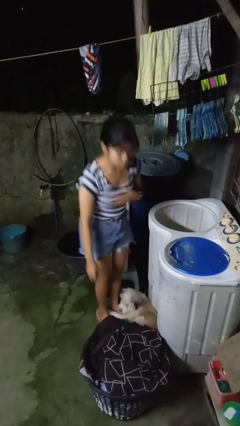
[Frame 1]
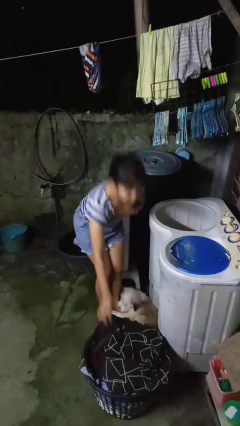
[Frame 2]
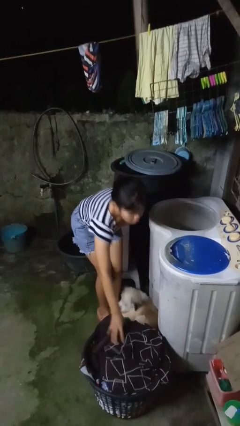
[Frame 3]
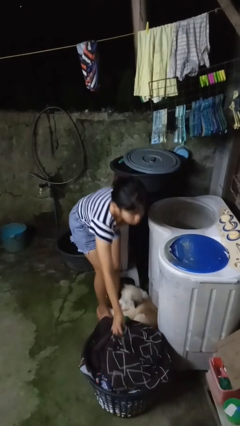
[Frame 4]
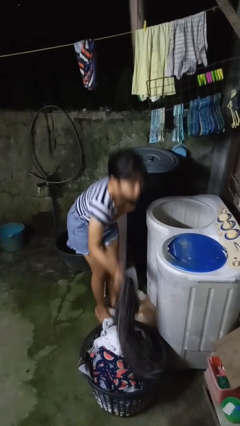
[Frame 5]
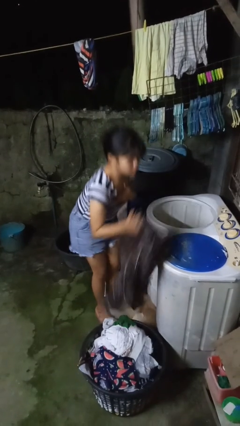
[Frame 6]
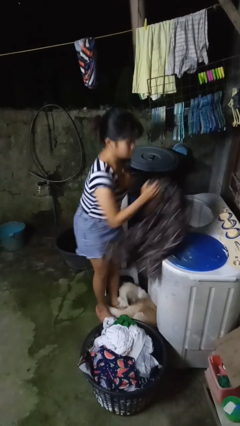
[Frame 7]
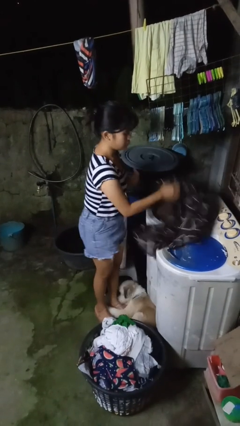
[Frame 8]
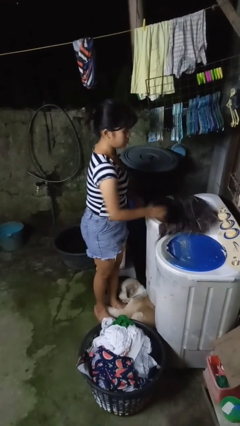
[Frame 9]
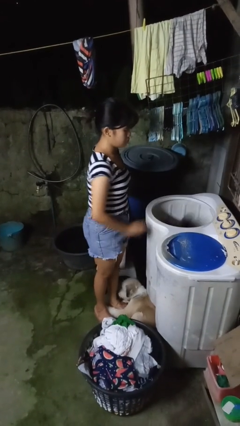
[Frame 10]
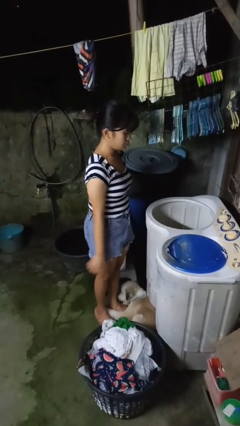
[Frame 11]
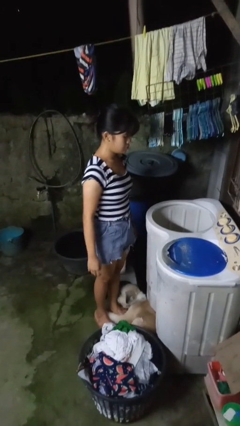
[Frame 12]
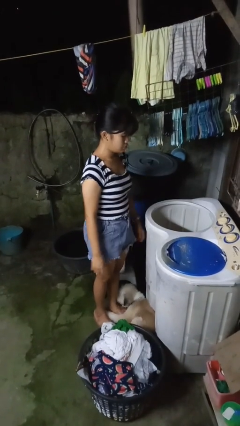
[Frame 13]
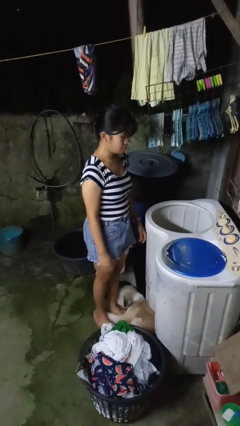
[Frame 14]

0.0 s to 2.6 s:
person loads clotheswasher

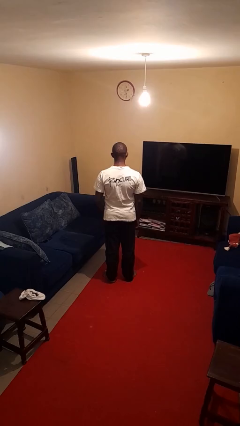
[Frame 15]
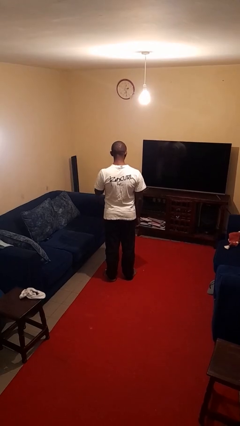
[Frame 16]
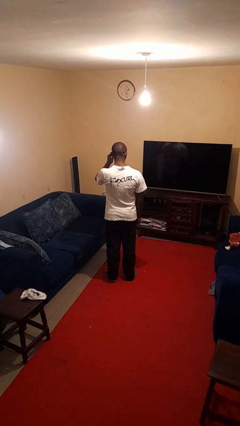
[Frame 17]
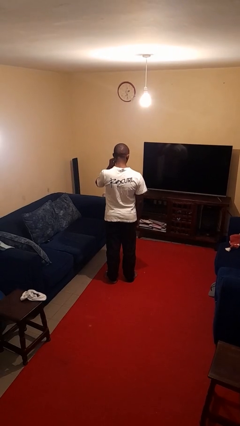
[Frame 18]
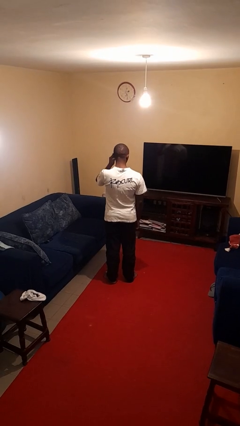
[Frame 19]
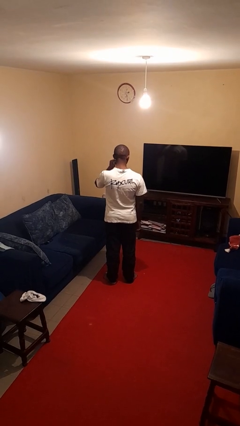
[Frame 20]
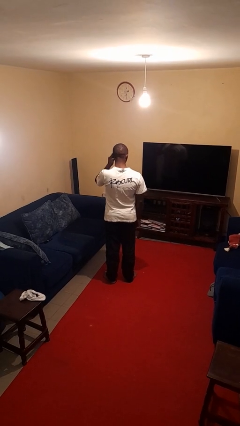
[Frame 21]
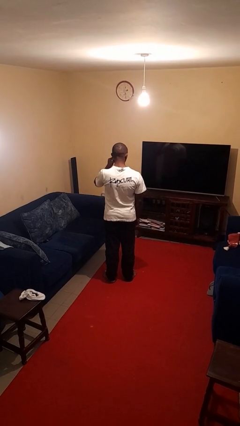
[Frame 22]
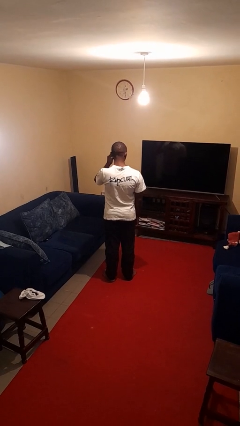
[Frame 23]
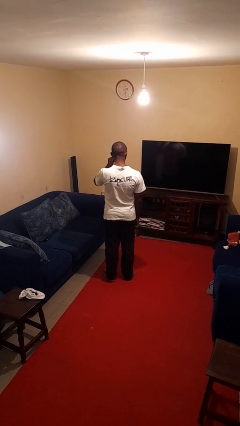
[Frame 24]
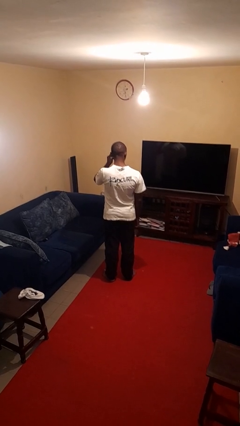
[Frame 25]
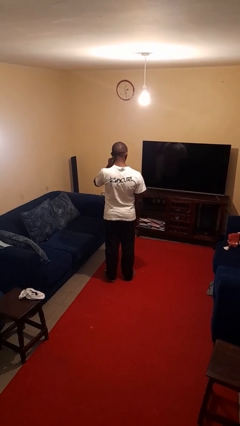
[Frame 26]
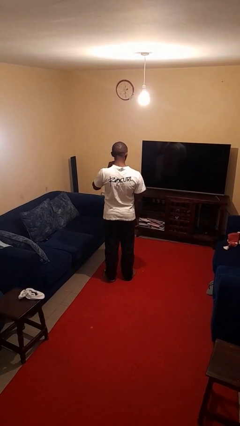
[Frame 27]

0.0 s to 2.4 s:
person touches earlobe

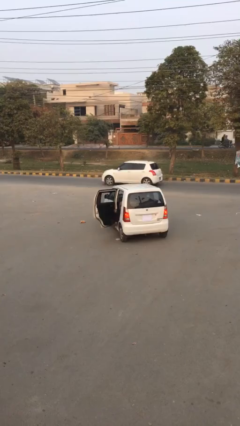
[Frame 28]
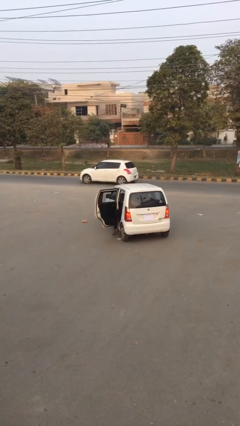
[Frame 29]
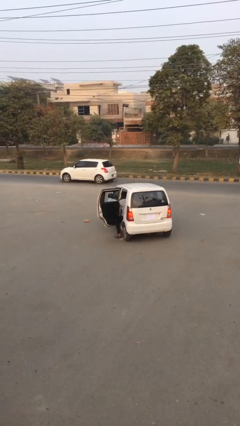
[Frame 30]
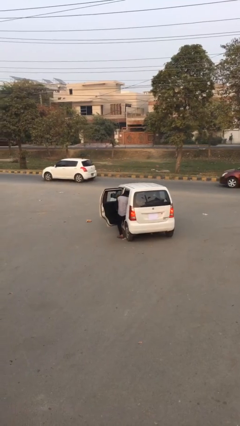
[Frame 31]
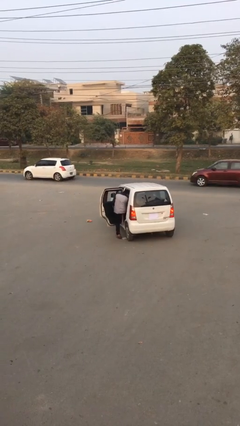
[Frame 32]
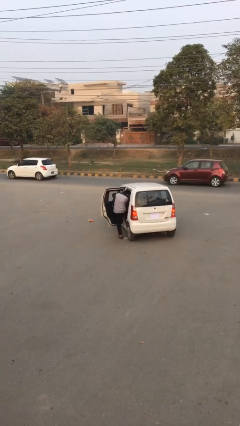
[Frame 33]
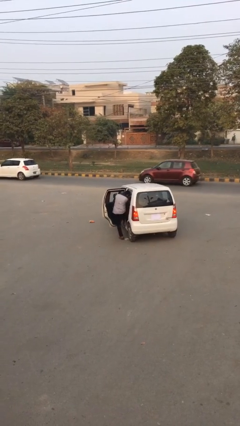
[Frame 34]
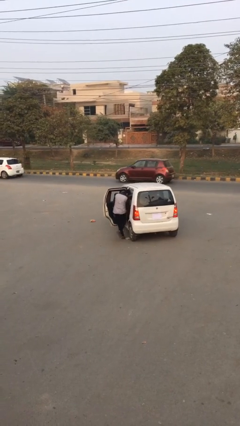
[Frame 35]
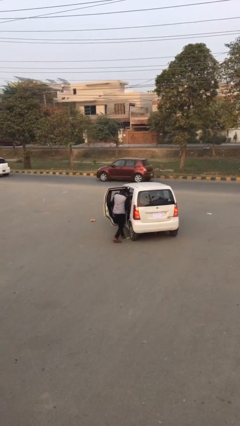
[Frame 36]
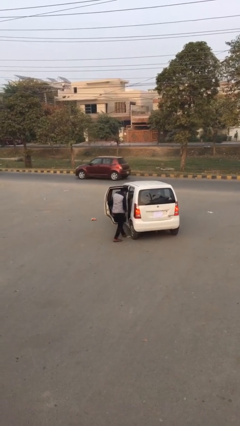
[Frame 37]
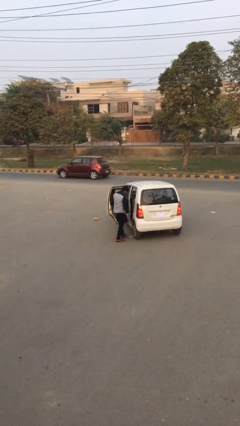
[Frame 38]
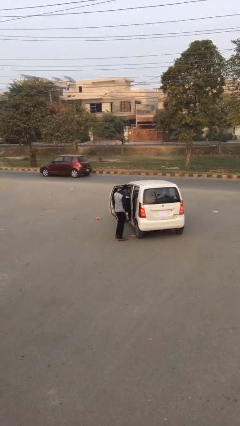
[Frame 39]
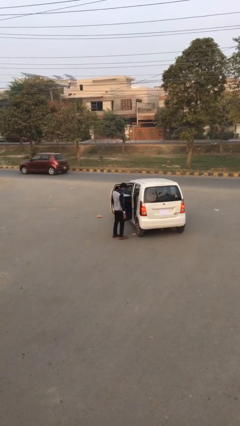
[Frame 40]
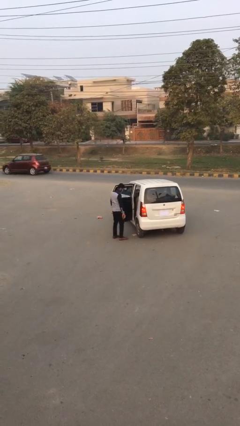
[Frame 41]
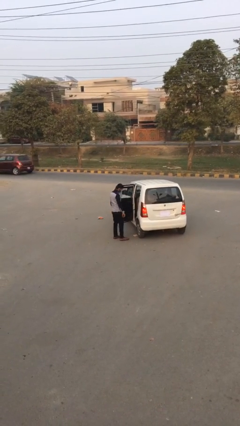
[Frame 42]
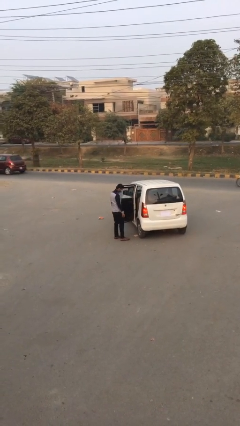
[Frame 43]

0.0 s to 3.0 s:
person exits car

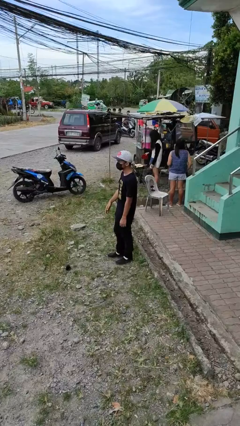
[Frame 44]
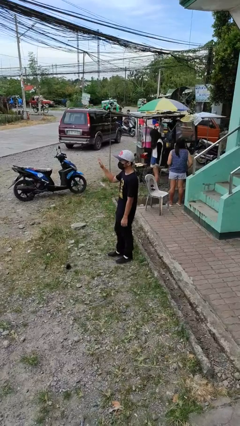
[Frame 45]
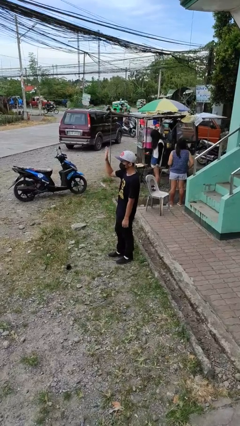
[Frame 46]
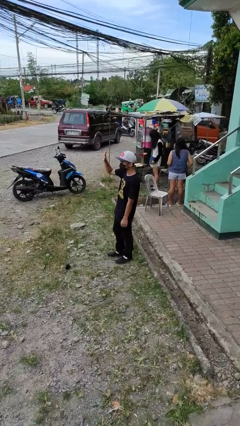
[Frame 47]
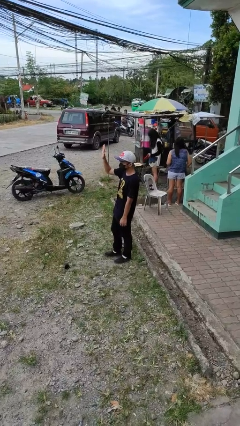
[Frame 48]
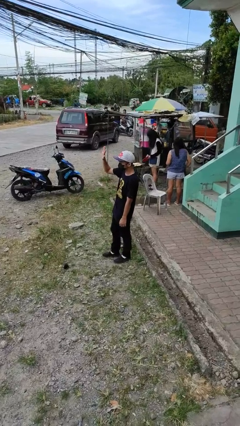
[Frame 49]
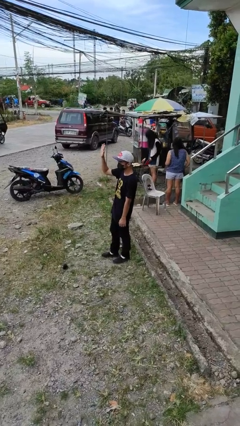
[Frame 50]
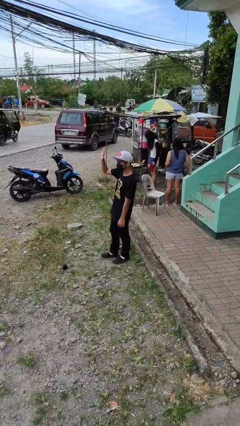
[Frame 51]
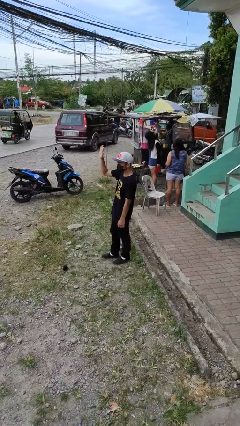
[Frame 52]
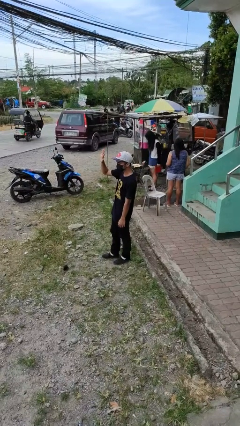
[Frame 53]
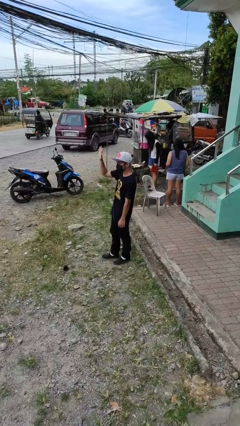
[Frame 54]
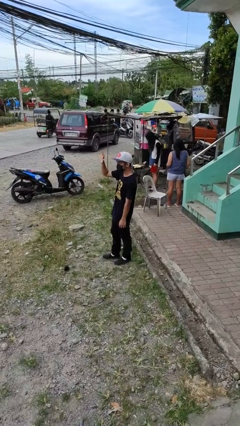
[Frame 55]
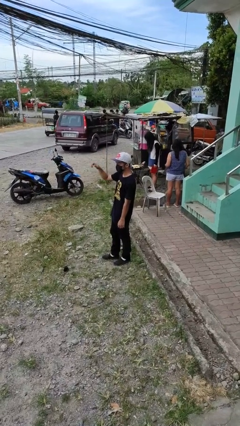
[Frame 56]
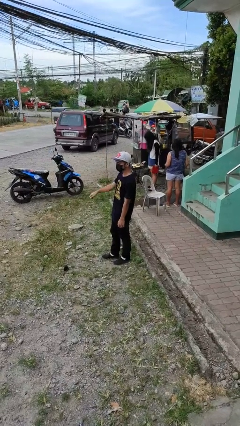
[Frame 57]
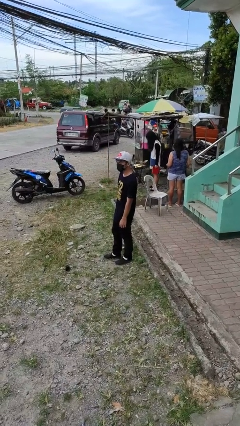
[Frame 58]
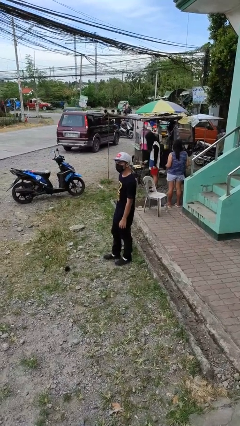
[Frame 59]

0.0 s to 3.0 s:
person waves at person

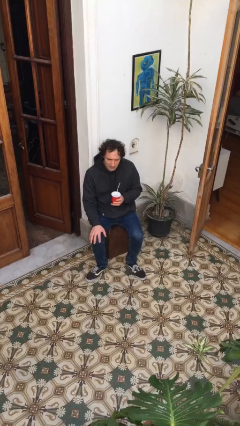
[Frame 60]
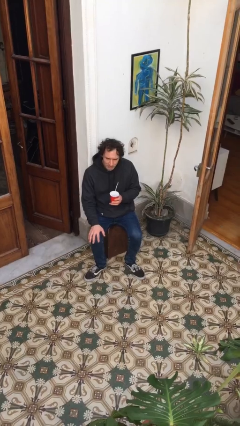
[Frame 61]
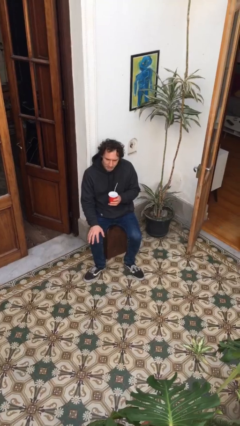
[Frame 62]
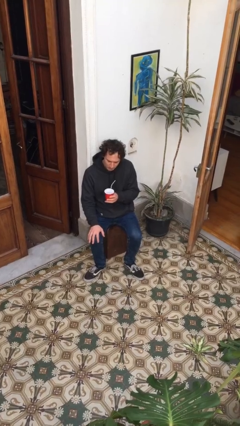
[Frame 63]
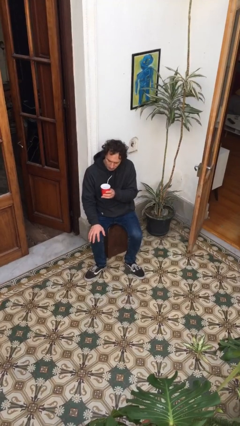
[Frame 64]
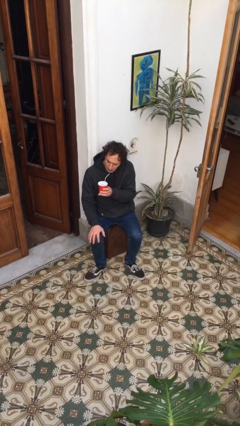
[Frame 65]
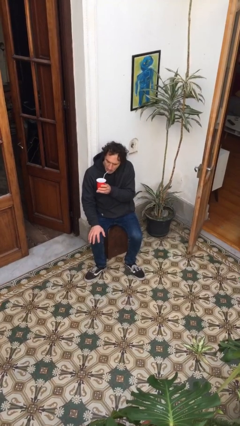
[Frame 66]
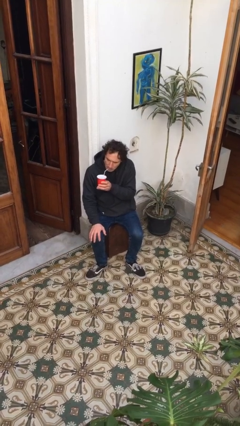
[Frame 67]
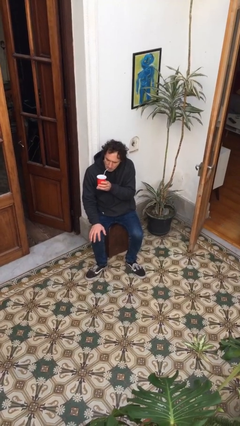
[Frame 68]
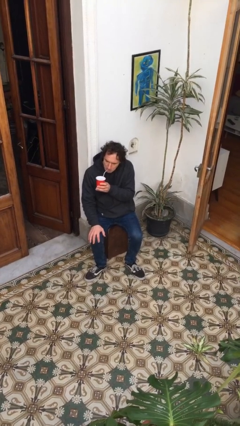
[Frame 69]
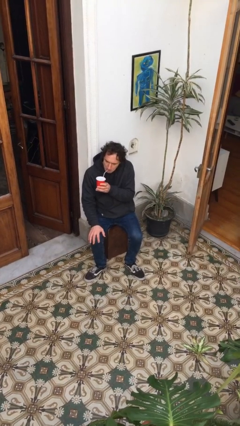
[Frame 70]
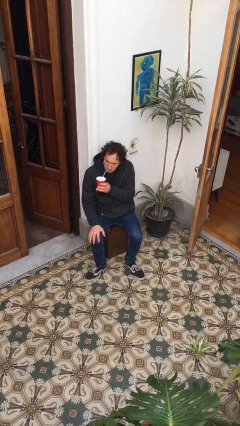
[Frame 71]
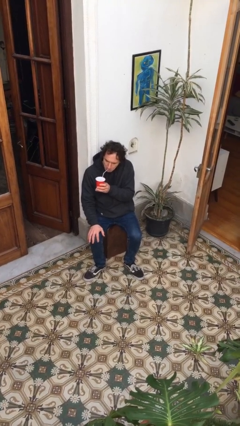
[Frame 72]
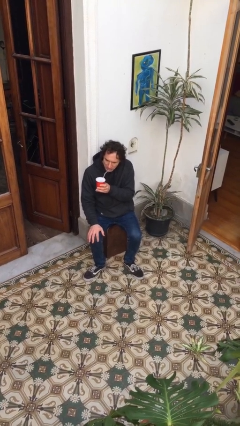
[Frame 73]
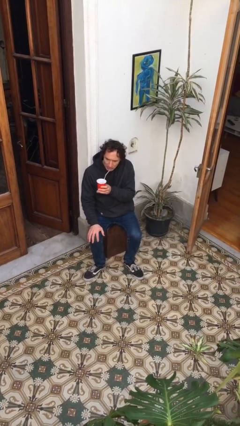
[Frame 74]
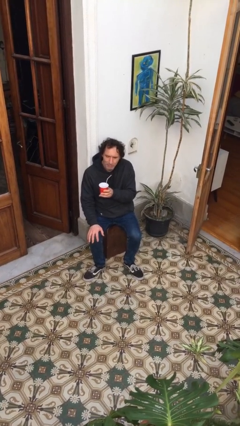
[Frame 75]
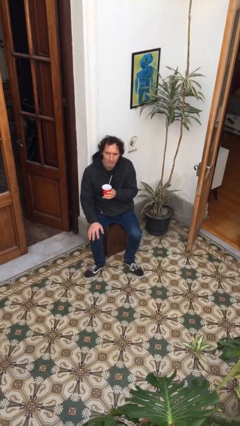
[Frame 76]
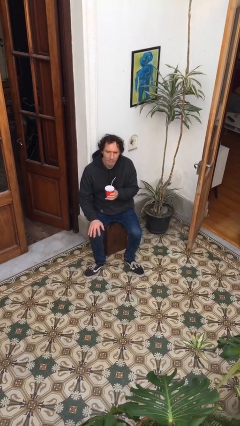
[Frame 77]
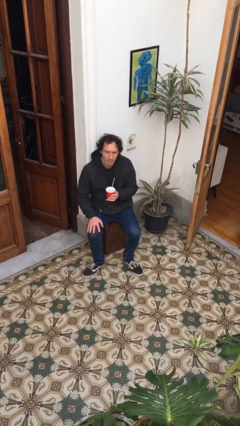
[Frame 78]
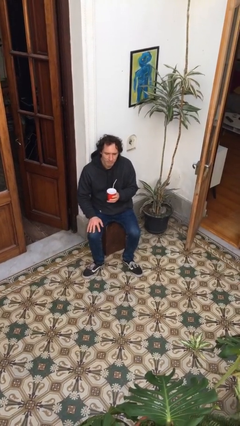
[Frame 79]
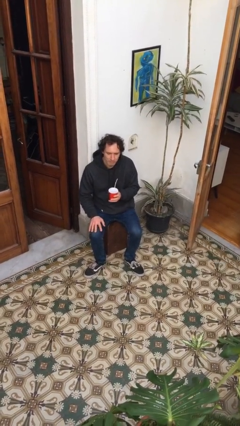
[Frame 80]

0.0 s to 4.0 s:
person drinks from straw

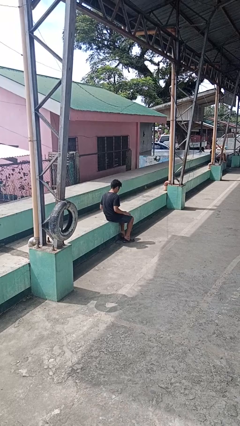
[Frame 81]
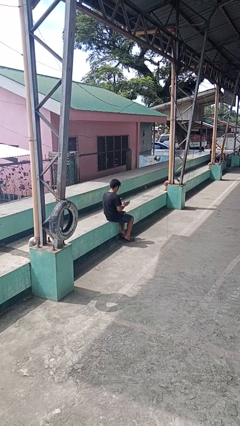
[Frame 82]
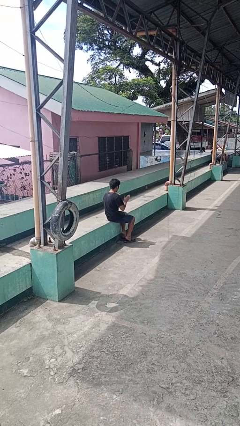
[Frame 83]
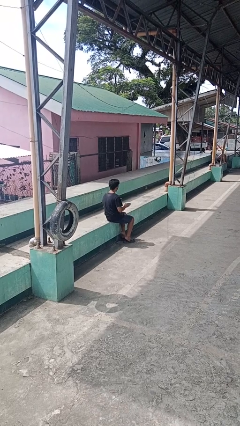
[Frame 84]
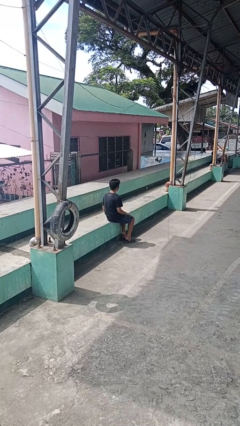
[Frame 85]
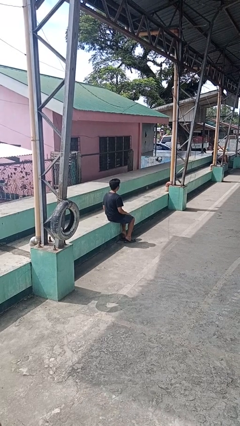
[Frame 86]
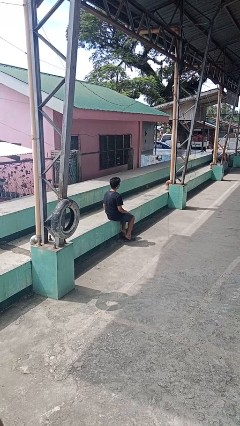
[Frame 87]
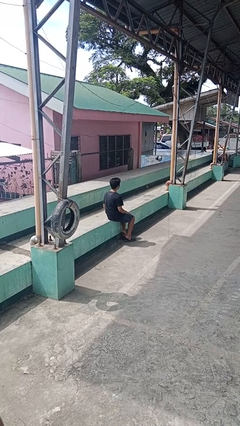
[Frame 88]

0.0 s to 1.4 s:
person slaps hands on thighs

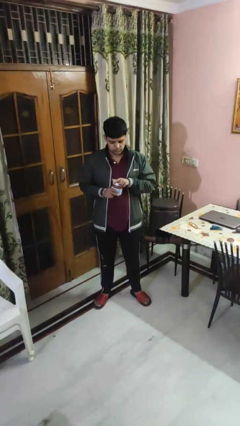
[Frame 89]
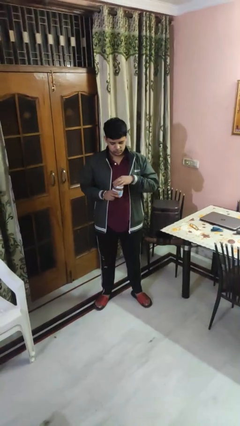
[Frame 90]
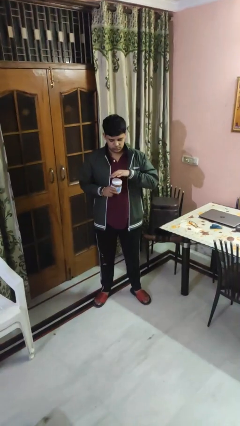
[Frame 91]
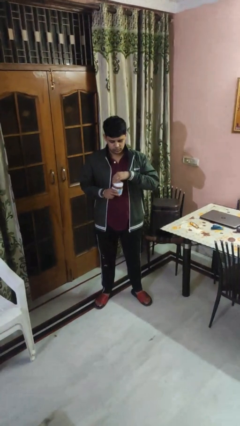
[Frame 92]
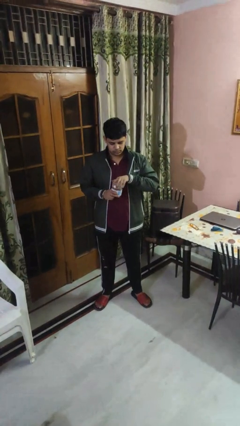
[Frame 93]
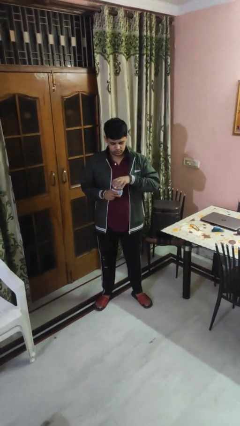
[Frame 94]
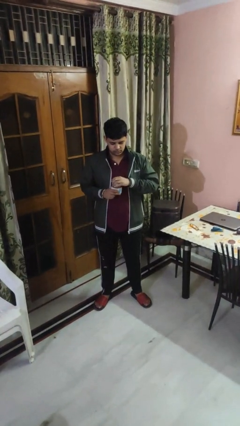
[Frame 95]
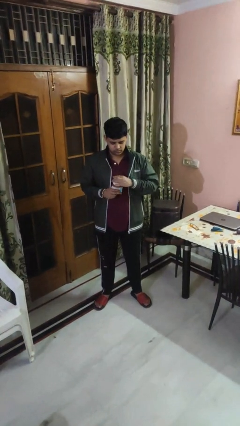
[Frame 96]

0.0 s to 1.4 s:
person closes jar
